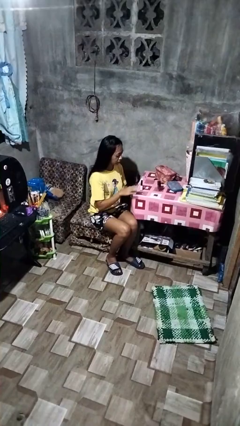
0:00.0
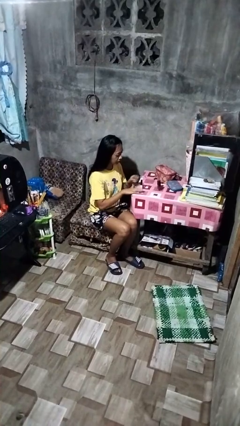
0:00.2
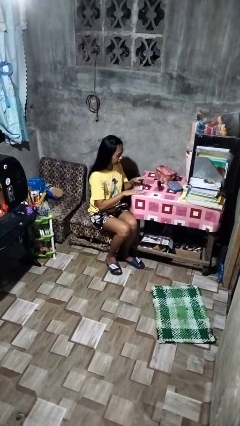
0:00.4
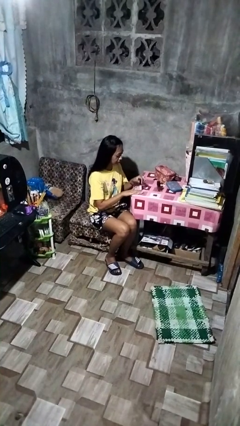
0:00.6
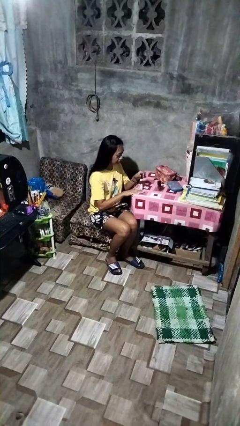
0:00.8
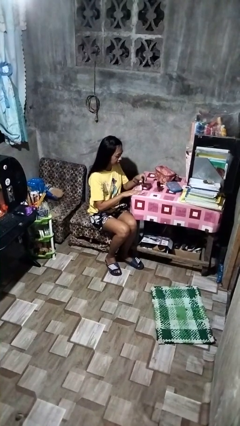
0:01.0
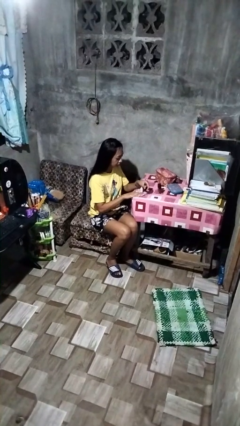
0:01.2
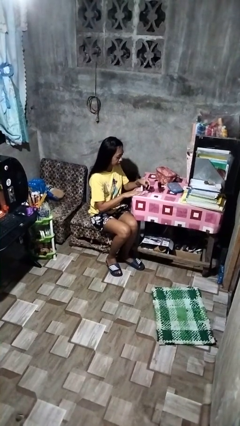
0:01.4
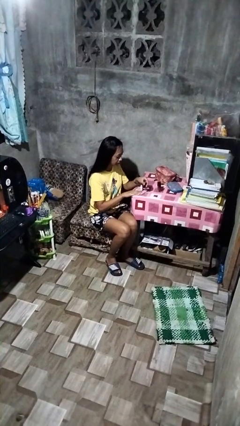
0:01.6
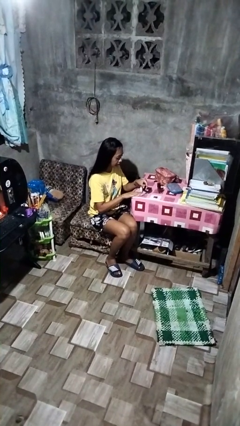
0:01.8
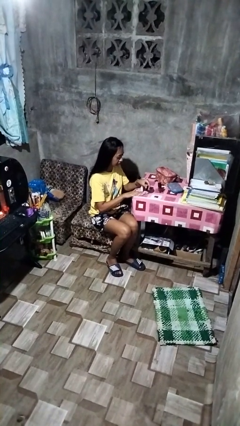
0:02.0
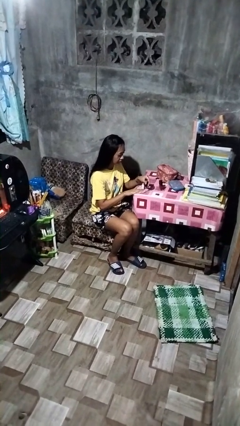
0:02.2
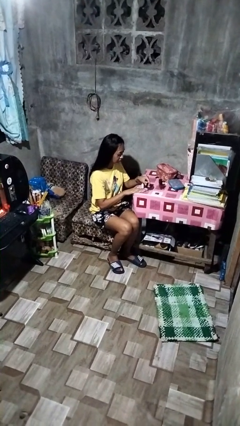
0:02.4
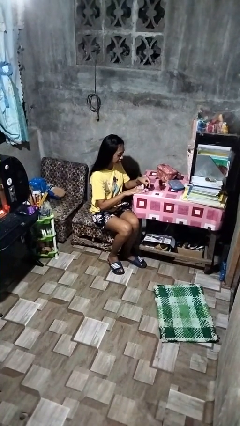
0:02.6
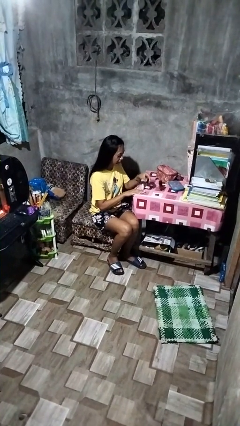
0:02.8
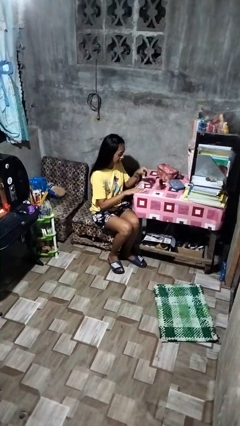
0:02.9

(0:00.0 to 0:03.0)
person paints fingernails

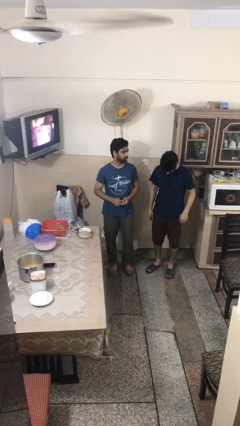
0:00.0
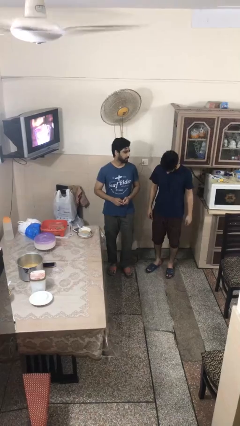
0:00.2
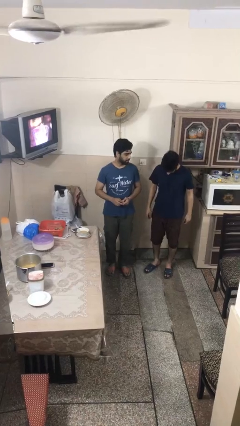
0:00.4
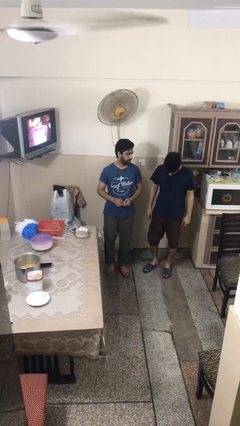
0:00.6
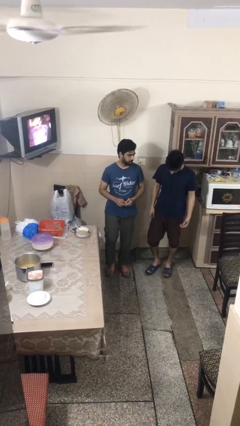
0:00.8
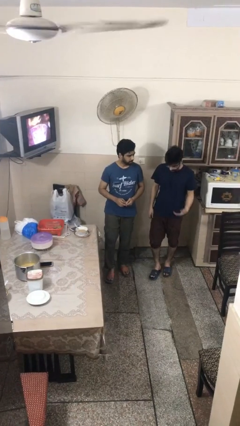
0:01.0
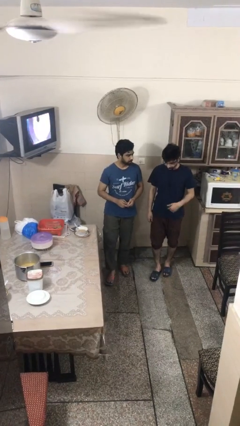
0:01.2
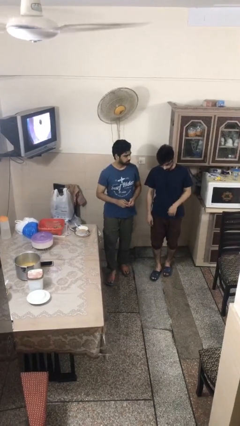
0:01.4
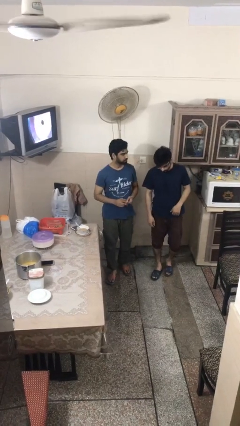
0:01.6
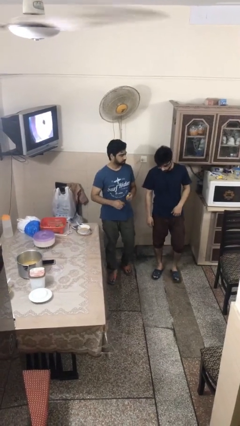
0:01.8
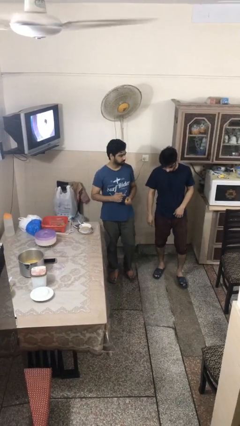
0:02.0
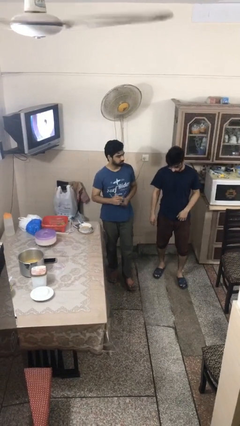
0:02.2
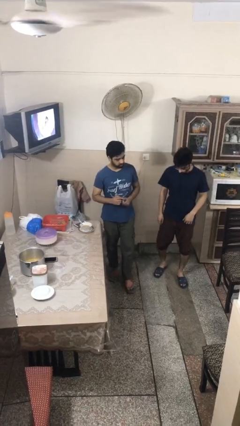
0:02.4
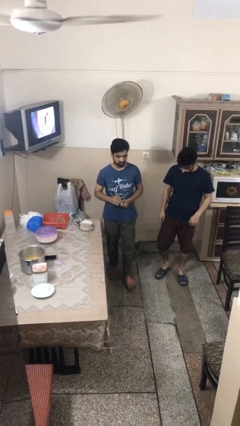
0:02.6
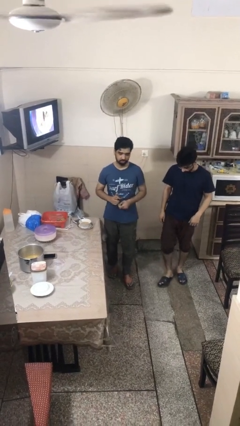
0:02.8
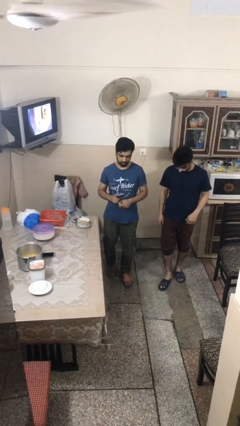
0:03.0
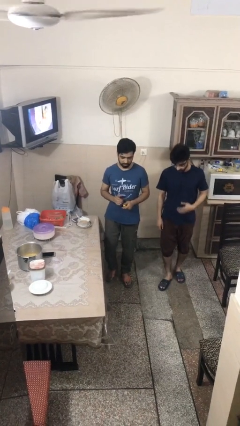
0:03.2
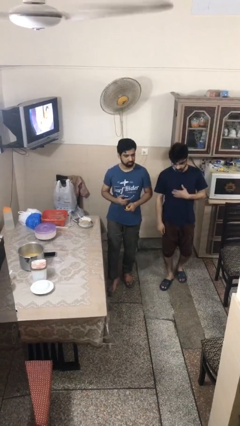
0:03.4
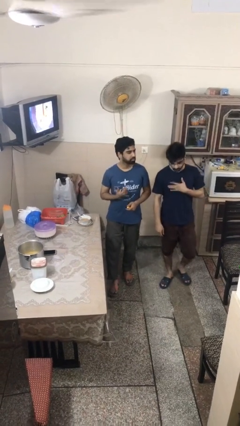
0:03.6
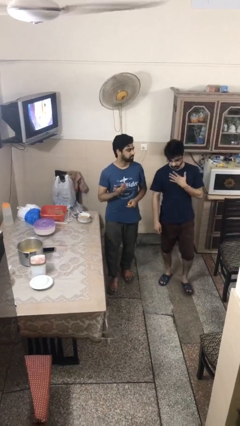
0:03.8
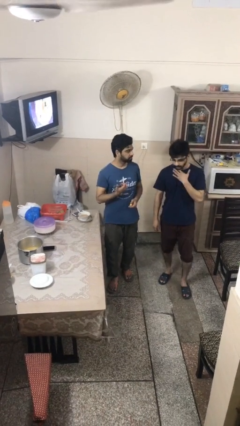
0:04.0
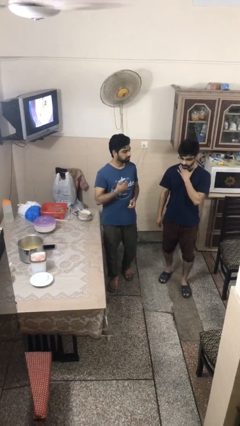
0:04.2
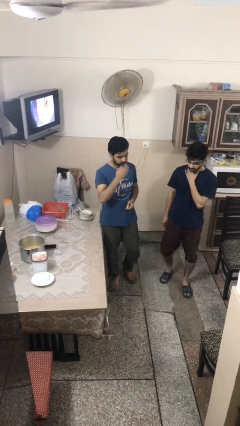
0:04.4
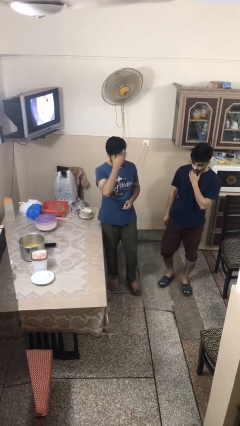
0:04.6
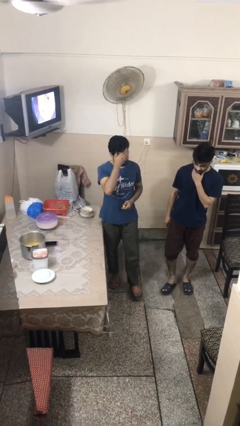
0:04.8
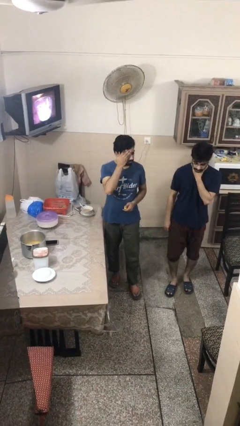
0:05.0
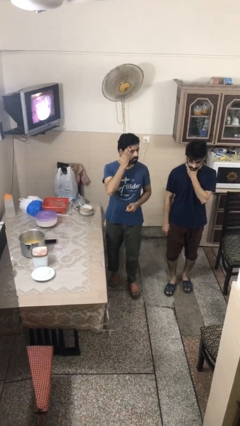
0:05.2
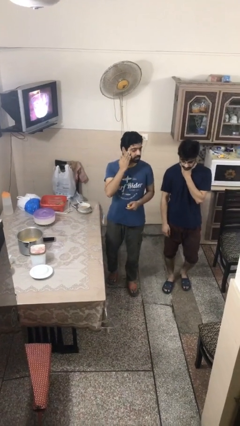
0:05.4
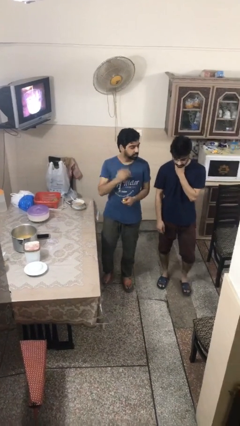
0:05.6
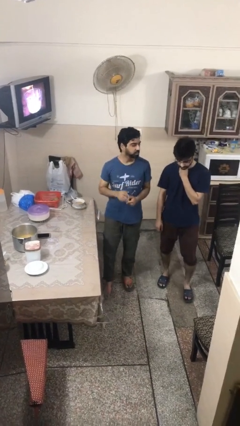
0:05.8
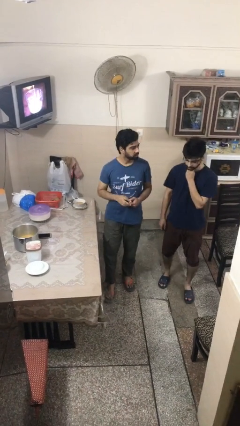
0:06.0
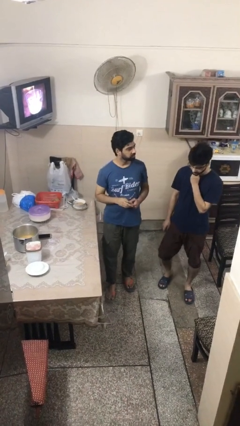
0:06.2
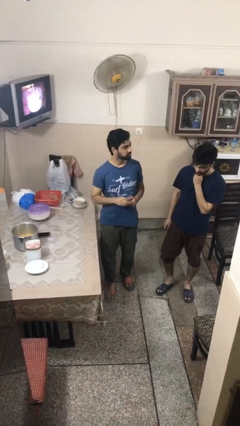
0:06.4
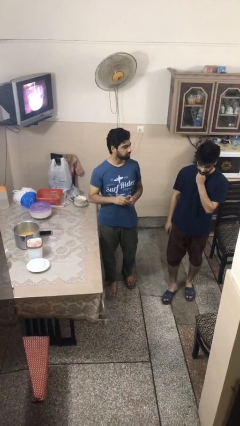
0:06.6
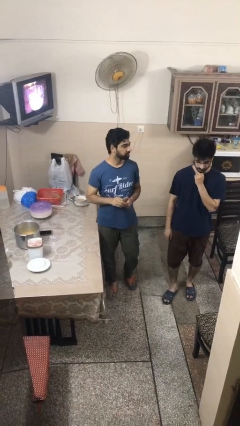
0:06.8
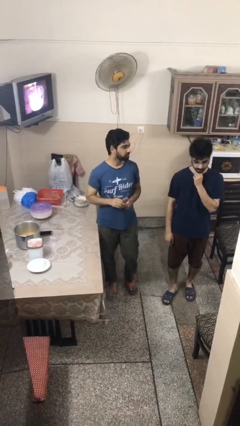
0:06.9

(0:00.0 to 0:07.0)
person talks to person

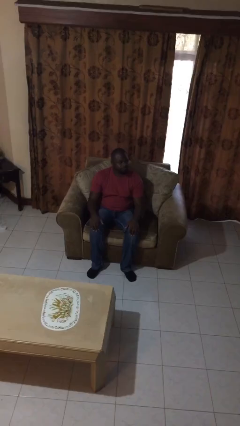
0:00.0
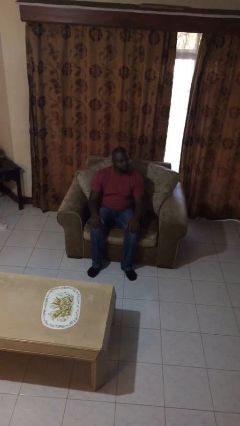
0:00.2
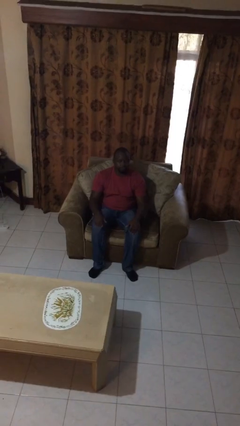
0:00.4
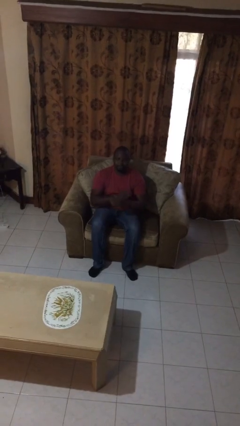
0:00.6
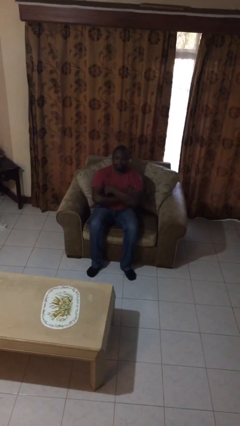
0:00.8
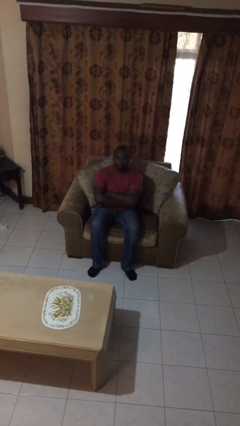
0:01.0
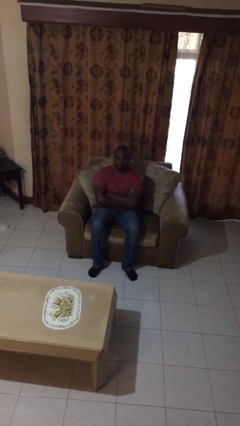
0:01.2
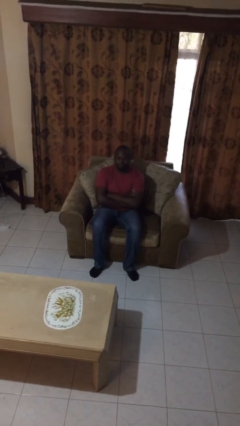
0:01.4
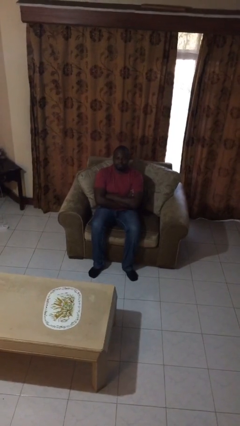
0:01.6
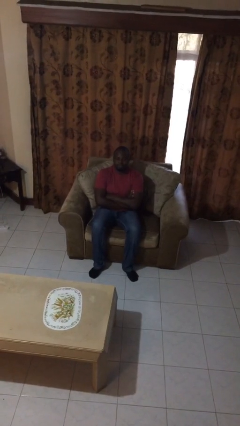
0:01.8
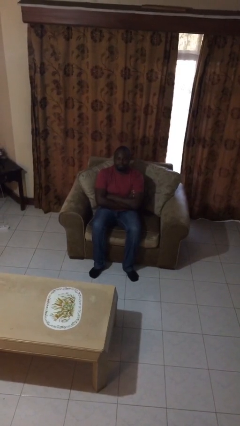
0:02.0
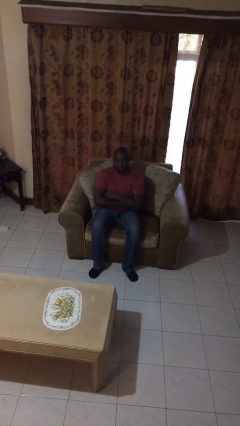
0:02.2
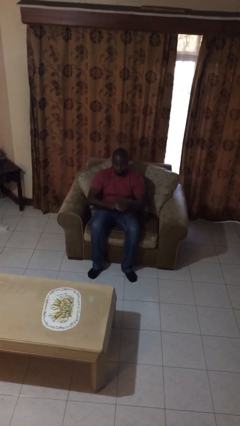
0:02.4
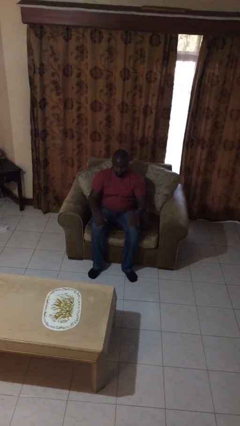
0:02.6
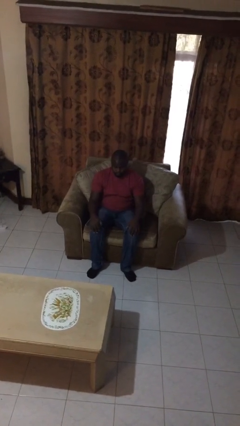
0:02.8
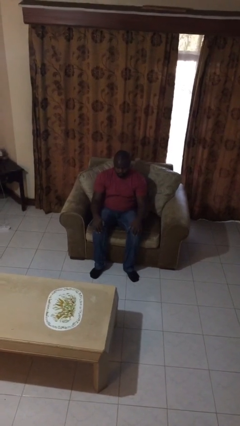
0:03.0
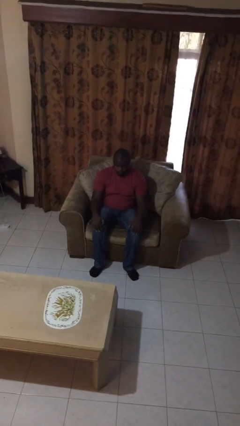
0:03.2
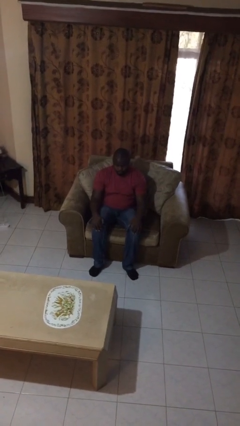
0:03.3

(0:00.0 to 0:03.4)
person crosses arms

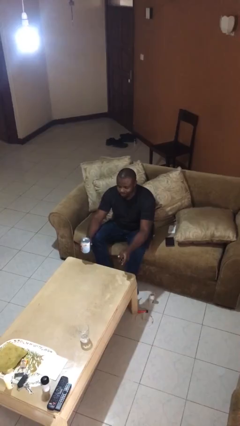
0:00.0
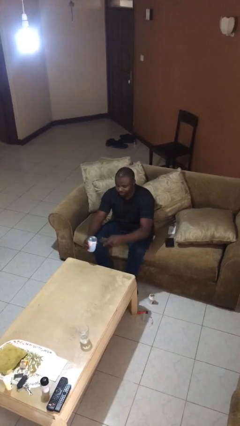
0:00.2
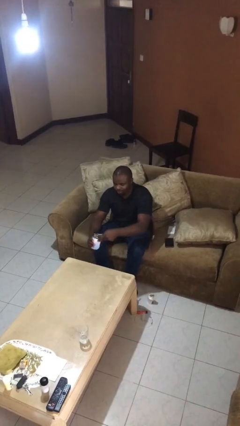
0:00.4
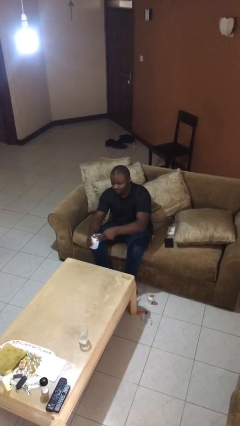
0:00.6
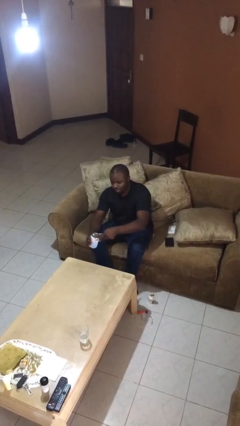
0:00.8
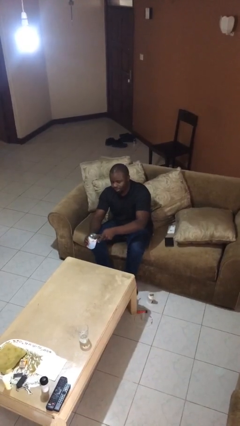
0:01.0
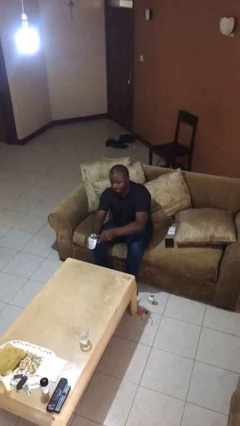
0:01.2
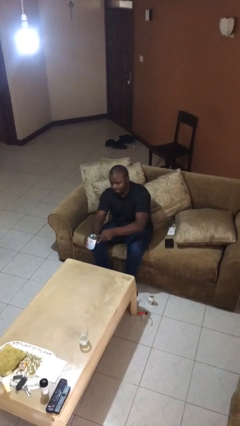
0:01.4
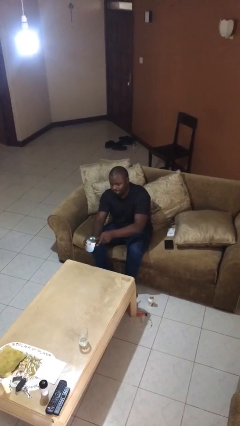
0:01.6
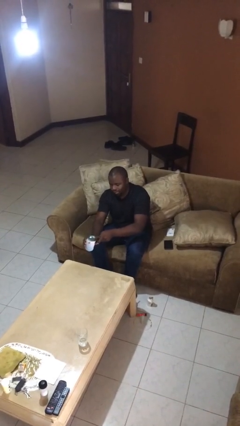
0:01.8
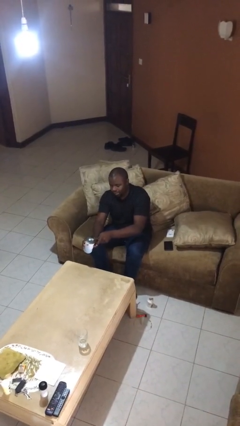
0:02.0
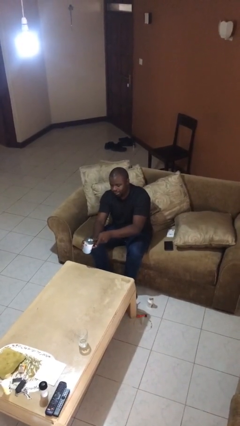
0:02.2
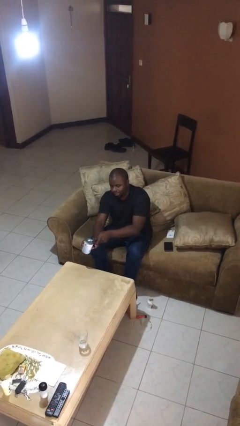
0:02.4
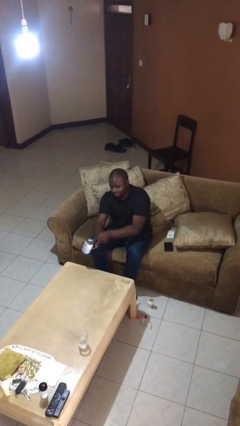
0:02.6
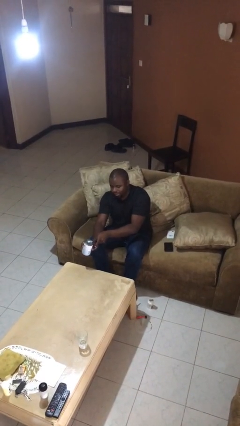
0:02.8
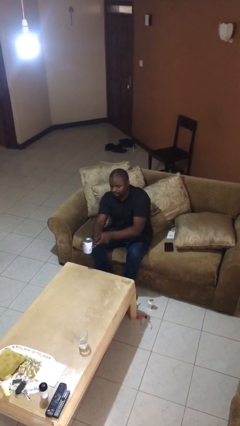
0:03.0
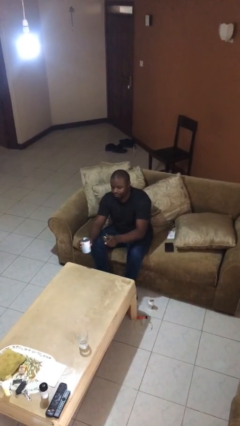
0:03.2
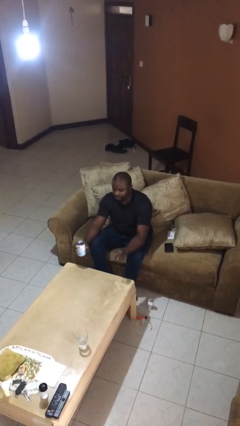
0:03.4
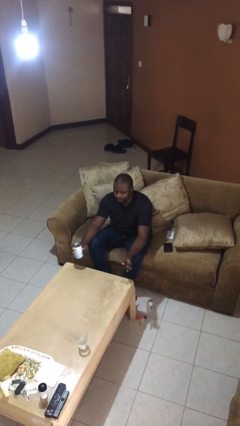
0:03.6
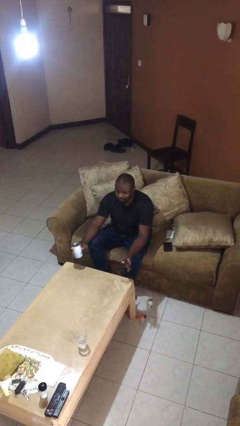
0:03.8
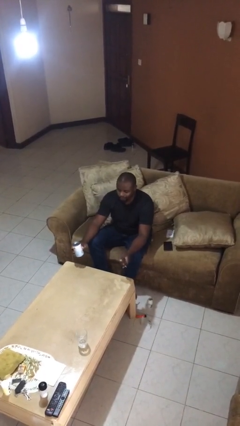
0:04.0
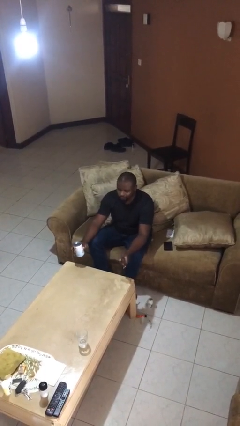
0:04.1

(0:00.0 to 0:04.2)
person opens can with can opener

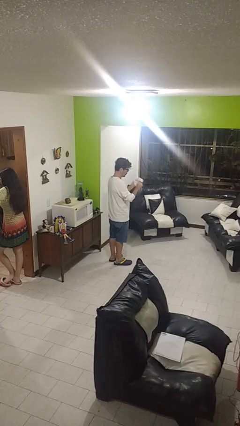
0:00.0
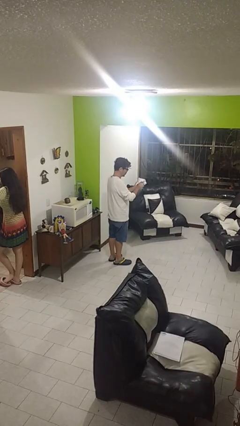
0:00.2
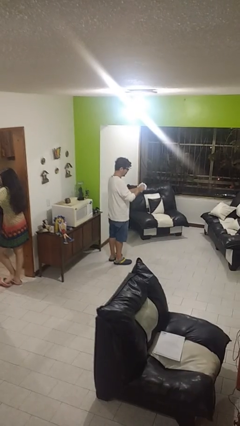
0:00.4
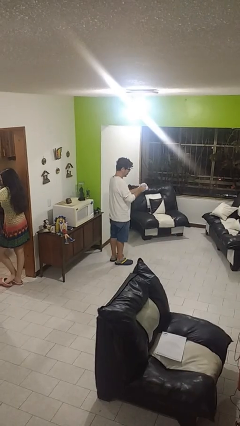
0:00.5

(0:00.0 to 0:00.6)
person crumples paper
